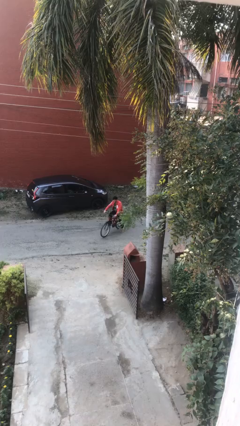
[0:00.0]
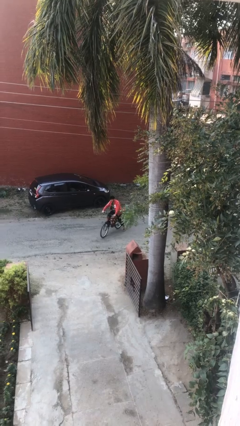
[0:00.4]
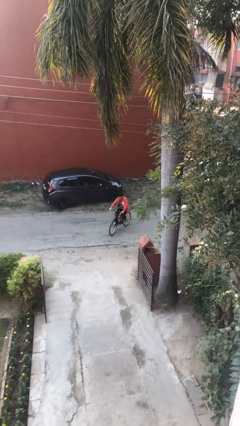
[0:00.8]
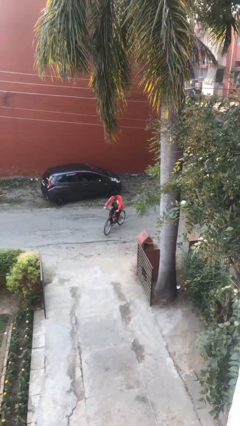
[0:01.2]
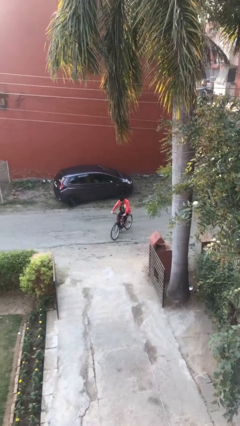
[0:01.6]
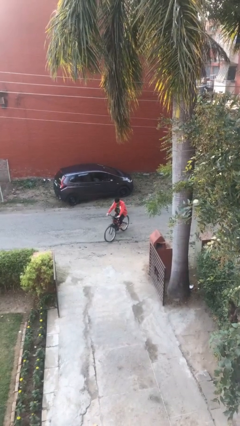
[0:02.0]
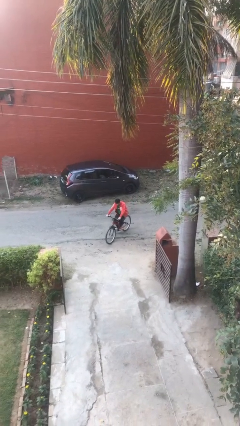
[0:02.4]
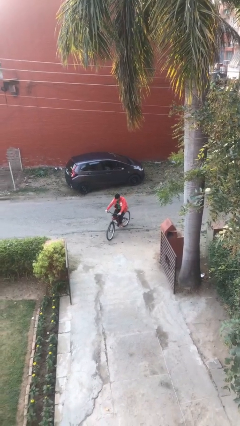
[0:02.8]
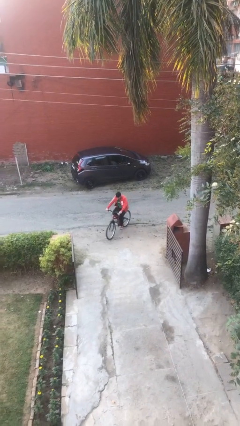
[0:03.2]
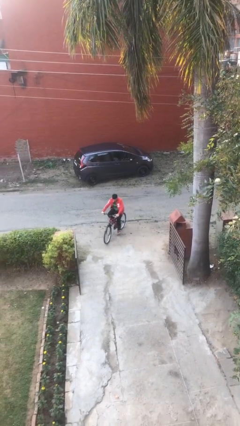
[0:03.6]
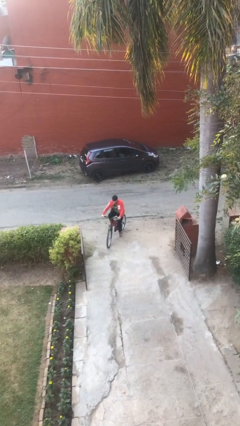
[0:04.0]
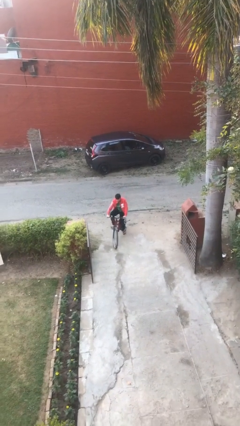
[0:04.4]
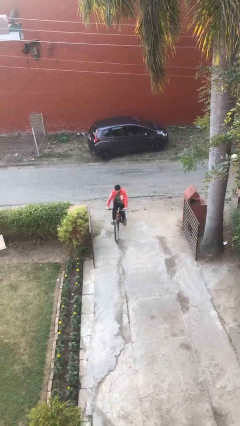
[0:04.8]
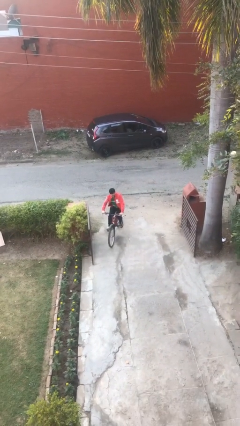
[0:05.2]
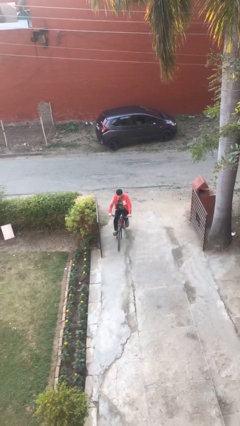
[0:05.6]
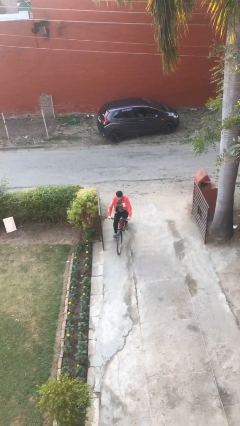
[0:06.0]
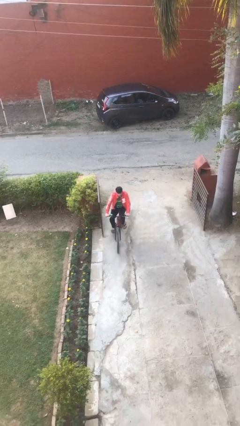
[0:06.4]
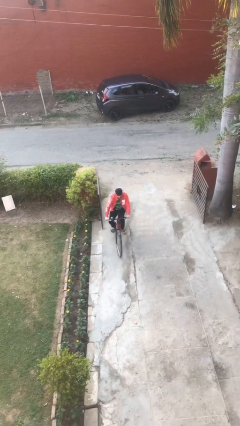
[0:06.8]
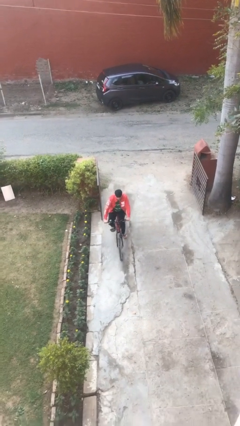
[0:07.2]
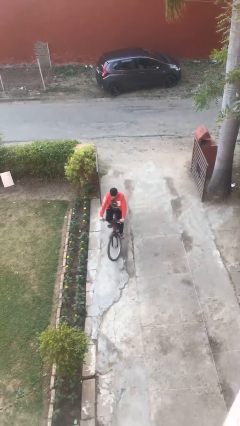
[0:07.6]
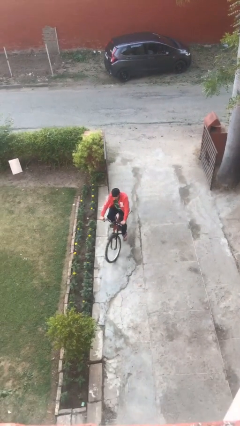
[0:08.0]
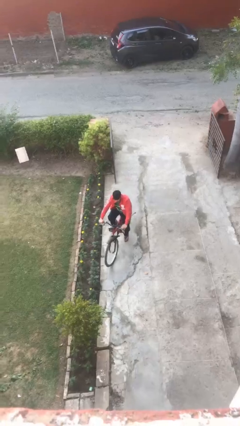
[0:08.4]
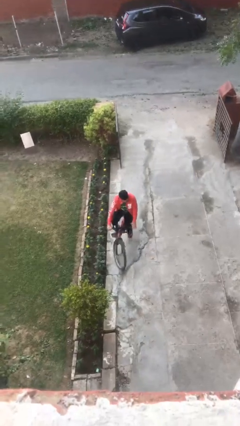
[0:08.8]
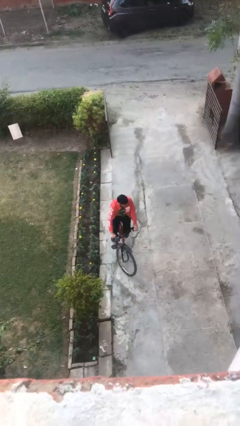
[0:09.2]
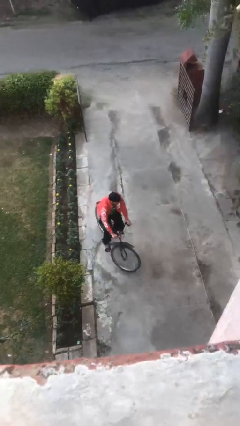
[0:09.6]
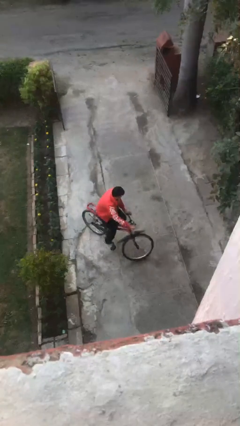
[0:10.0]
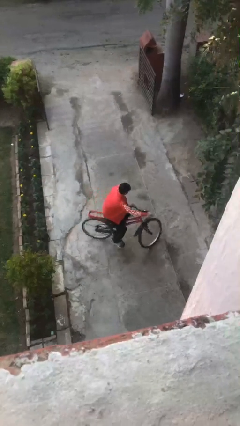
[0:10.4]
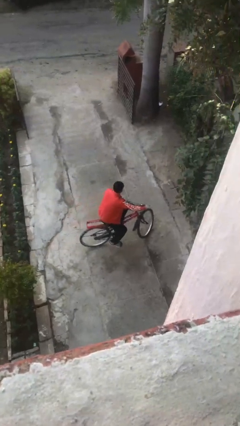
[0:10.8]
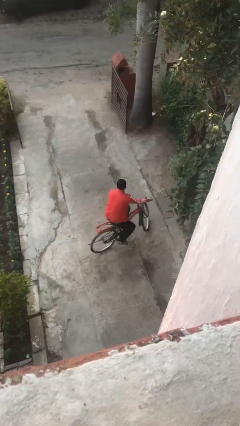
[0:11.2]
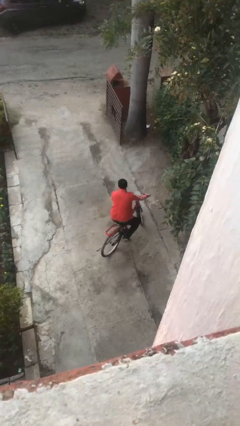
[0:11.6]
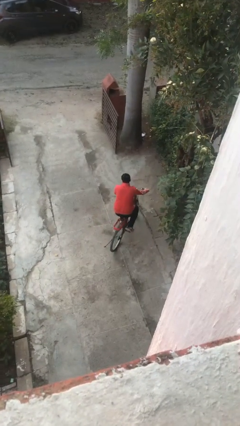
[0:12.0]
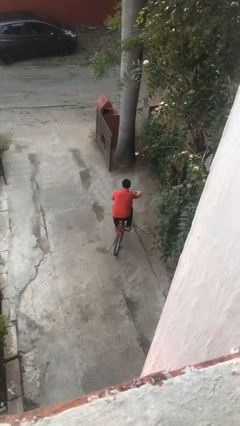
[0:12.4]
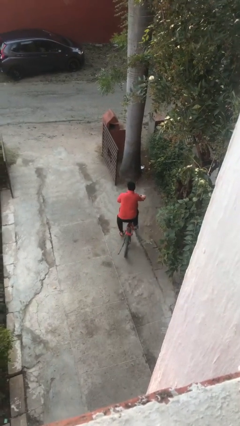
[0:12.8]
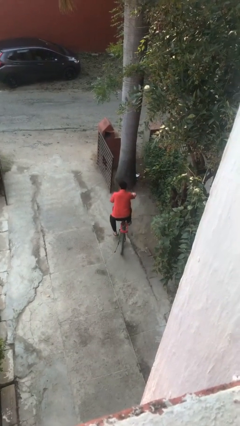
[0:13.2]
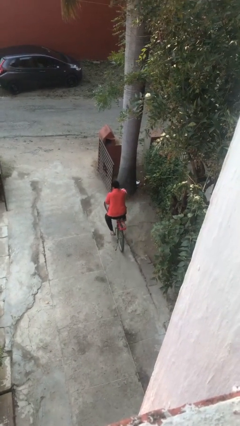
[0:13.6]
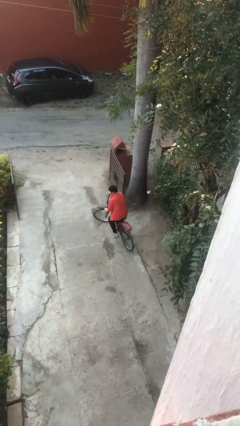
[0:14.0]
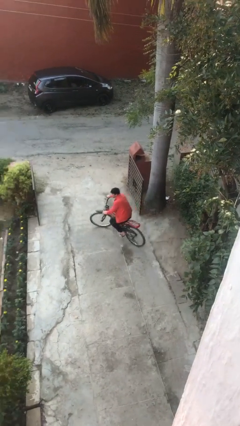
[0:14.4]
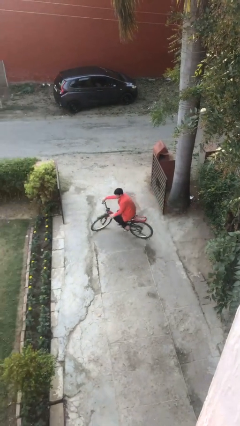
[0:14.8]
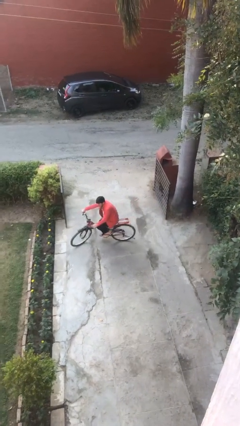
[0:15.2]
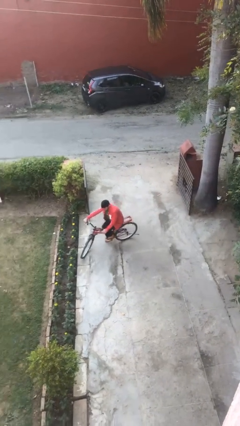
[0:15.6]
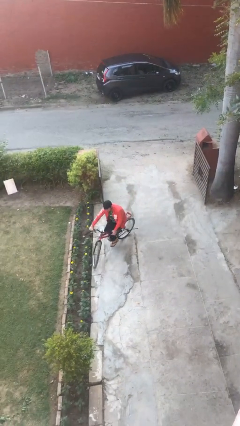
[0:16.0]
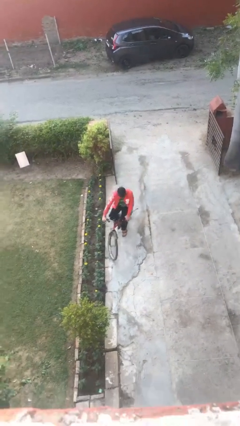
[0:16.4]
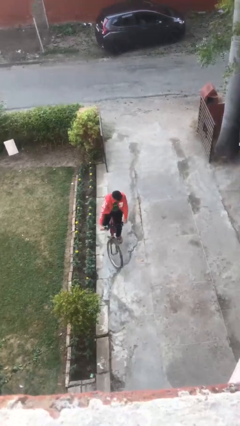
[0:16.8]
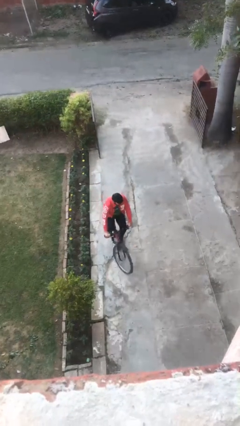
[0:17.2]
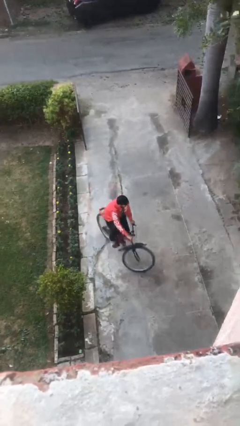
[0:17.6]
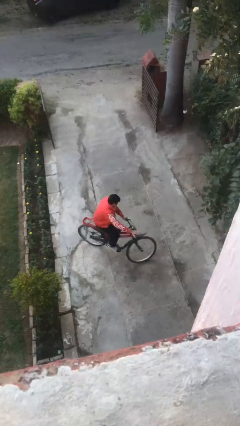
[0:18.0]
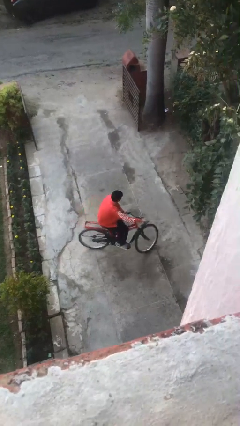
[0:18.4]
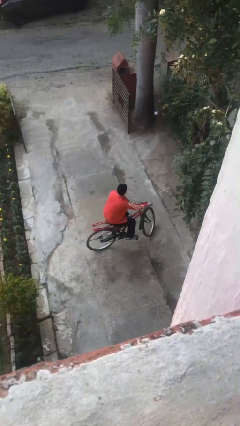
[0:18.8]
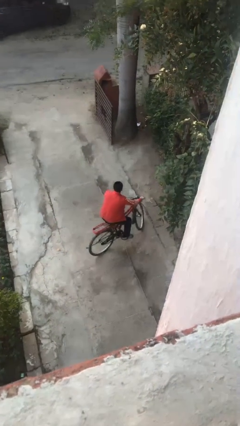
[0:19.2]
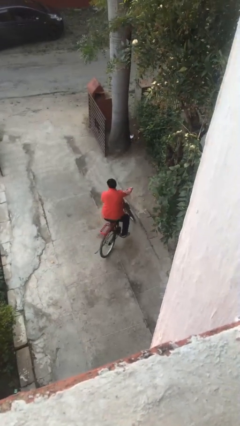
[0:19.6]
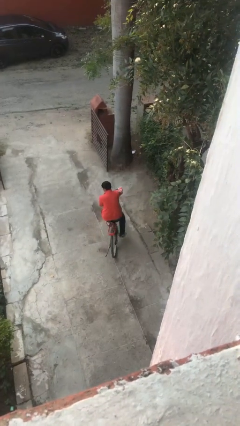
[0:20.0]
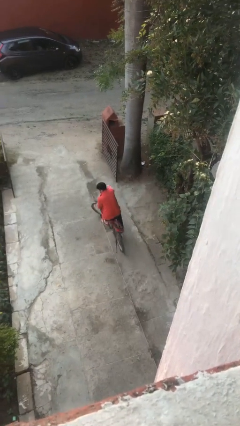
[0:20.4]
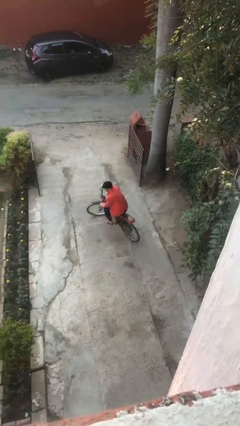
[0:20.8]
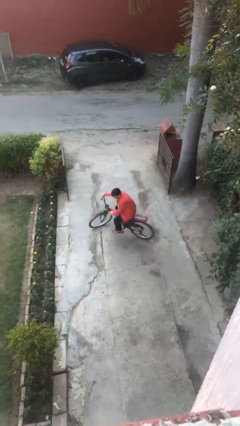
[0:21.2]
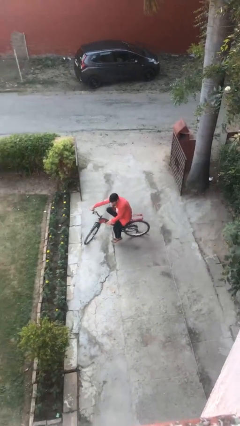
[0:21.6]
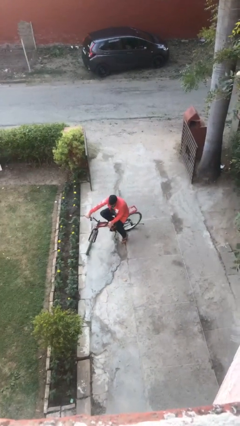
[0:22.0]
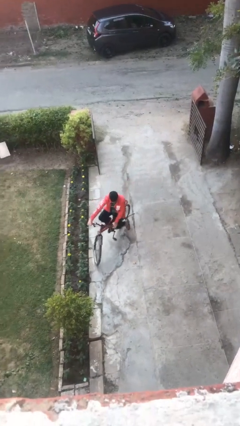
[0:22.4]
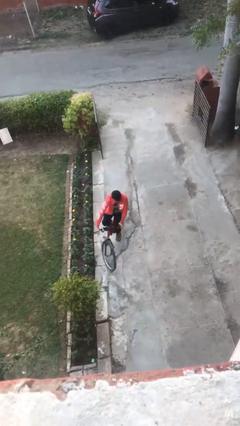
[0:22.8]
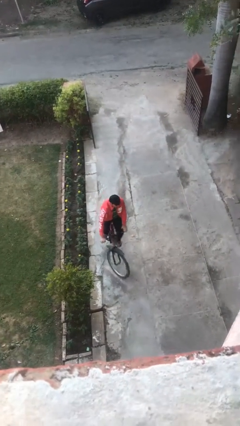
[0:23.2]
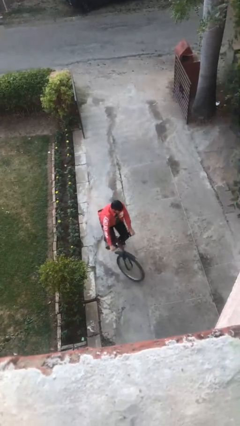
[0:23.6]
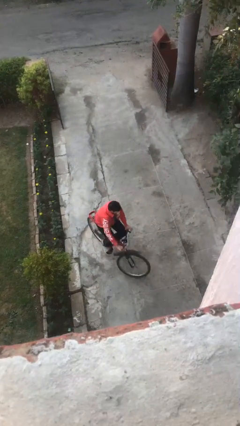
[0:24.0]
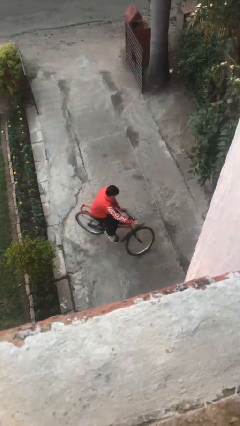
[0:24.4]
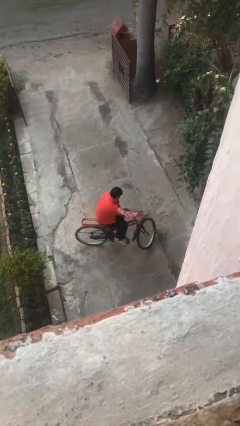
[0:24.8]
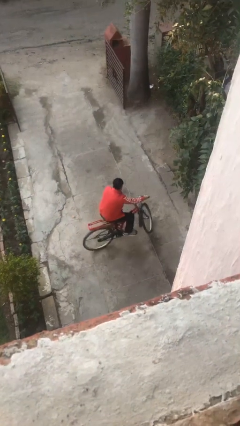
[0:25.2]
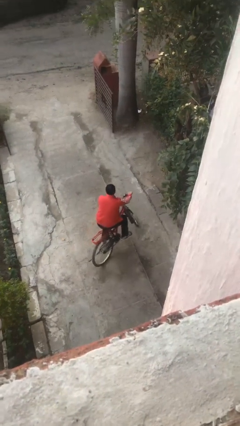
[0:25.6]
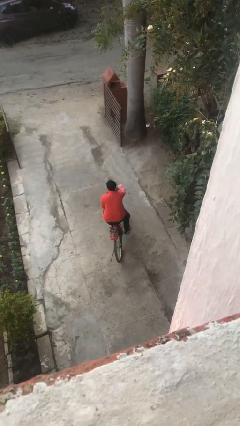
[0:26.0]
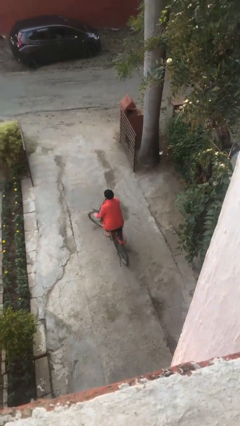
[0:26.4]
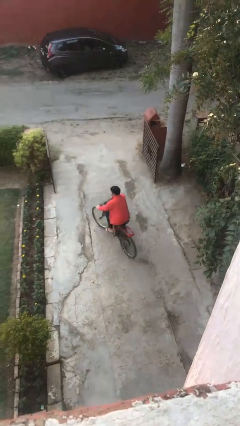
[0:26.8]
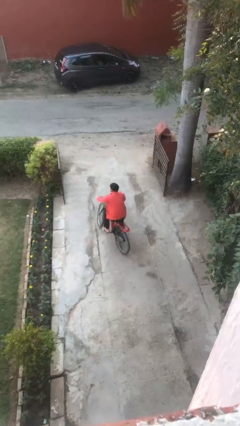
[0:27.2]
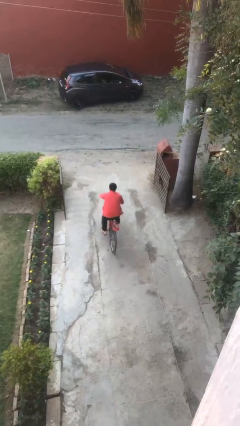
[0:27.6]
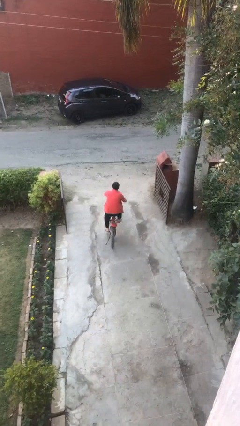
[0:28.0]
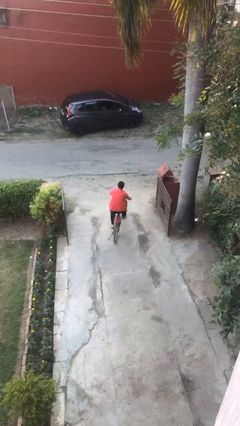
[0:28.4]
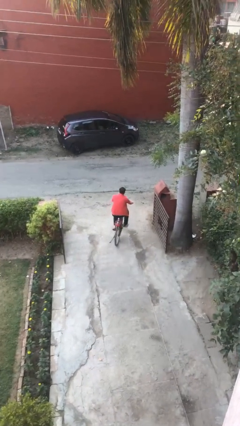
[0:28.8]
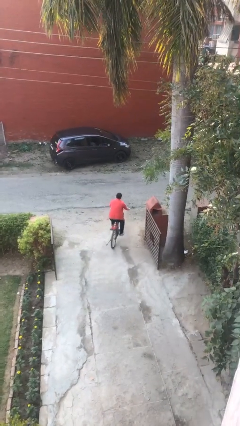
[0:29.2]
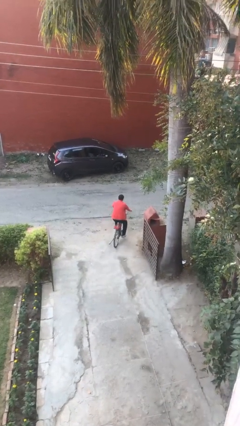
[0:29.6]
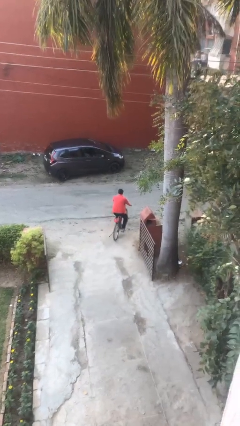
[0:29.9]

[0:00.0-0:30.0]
person rides bicycle

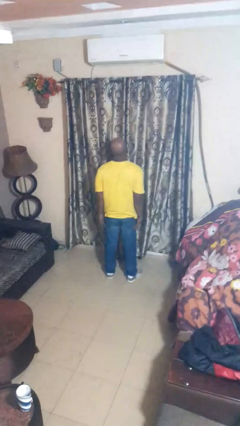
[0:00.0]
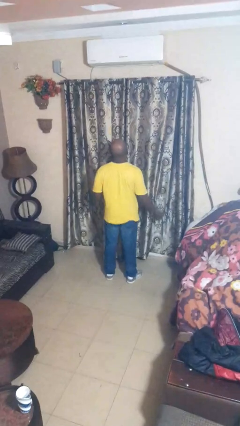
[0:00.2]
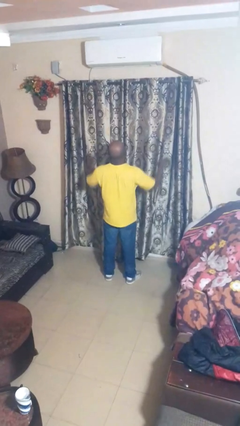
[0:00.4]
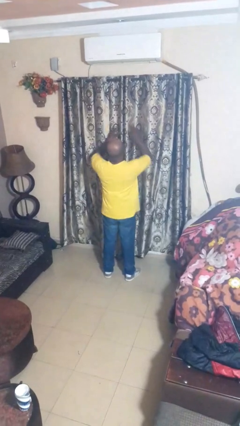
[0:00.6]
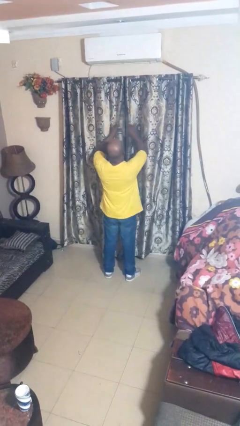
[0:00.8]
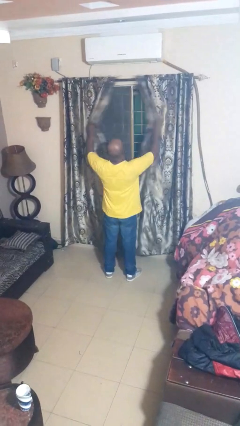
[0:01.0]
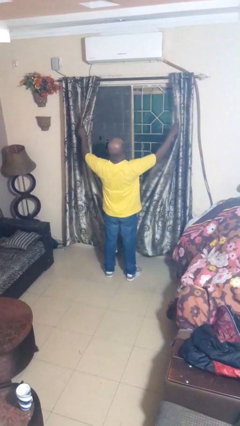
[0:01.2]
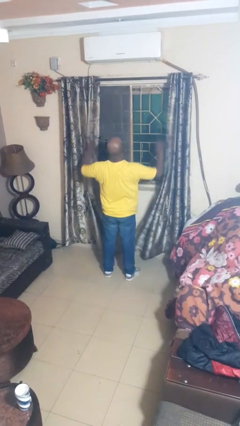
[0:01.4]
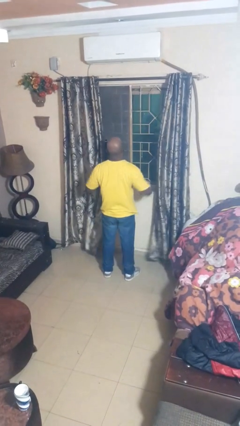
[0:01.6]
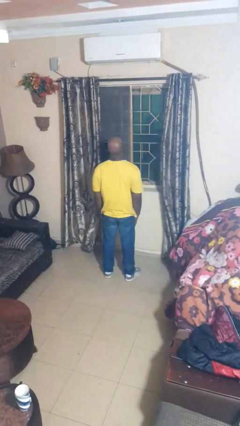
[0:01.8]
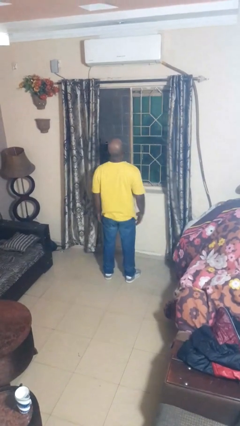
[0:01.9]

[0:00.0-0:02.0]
person opens curtains

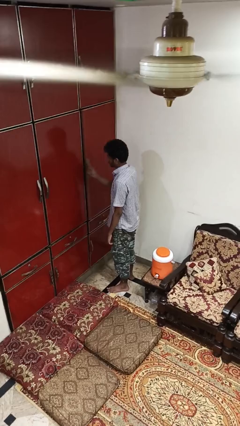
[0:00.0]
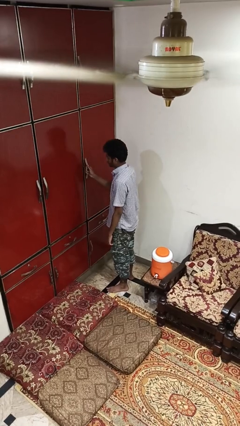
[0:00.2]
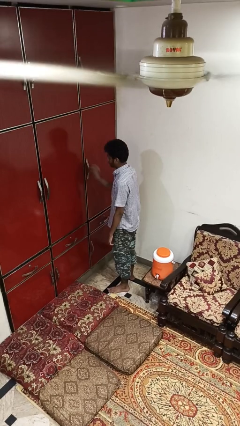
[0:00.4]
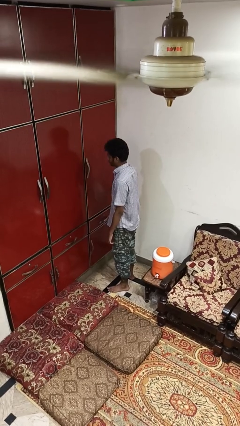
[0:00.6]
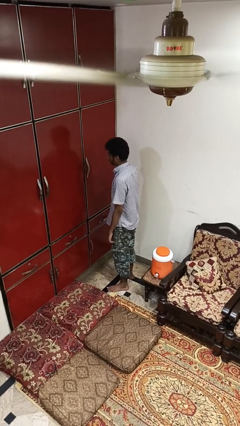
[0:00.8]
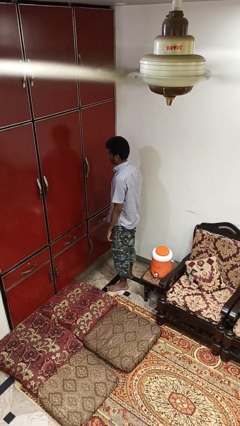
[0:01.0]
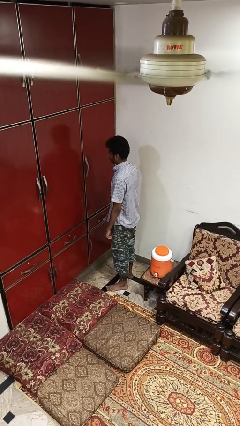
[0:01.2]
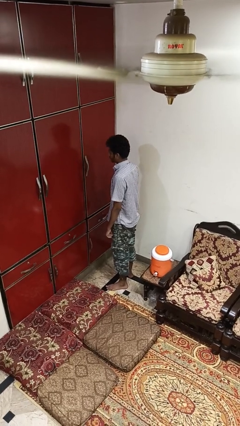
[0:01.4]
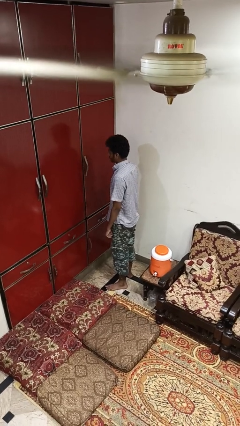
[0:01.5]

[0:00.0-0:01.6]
person closes cabinet
